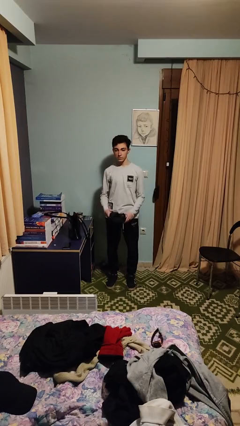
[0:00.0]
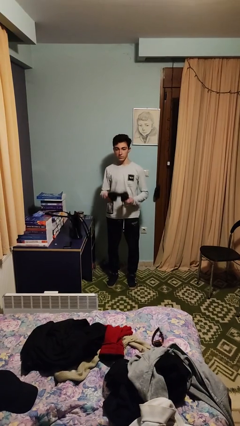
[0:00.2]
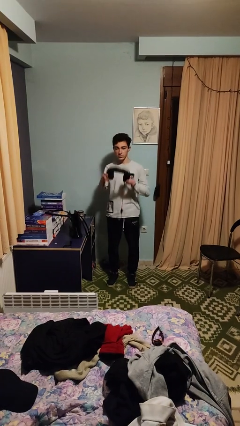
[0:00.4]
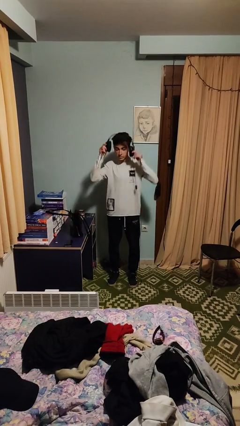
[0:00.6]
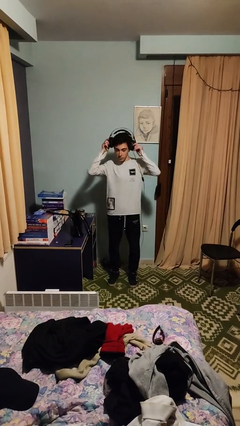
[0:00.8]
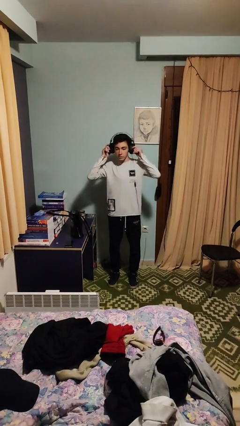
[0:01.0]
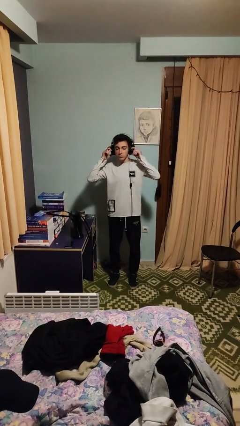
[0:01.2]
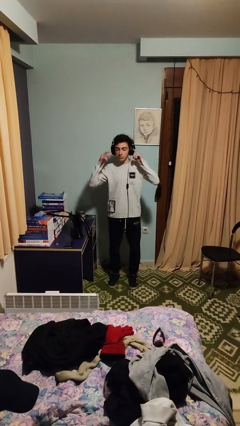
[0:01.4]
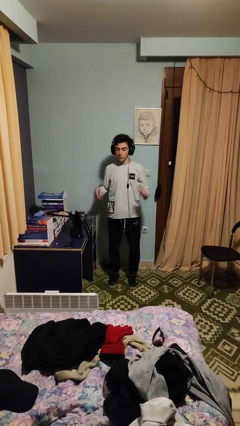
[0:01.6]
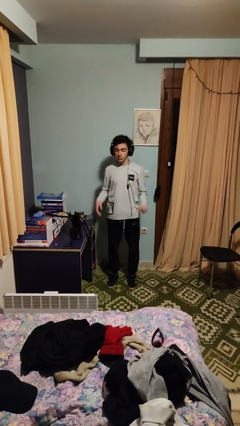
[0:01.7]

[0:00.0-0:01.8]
person puts on headphones

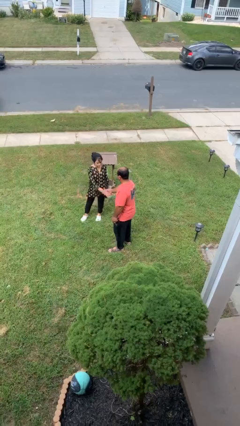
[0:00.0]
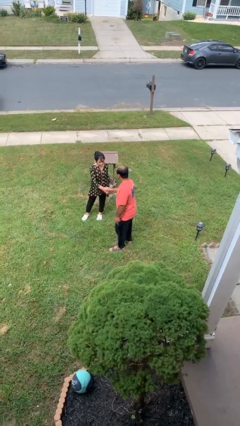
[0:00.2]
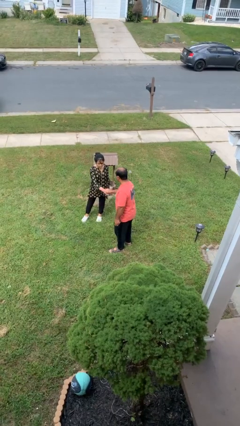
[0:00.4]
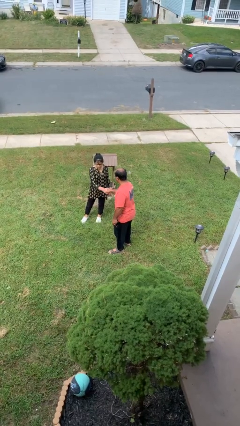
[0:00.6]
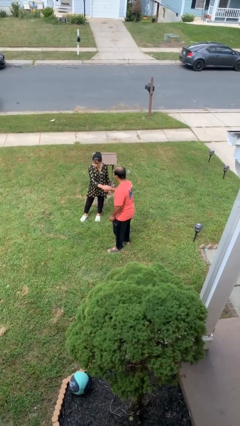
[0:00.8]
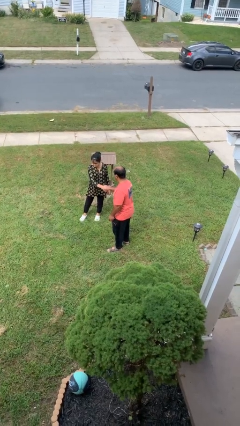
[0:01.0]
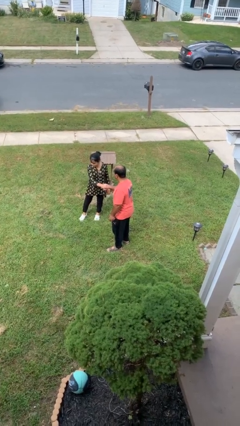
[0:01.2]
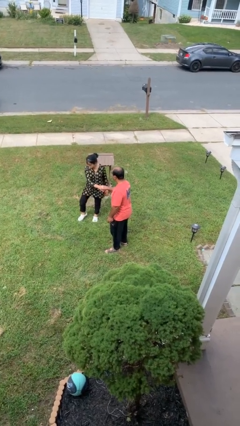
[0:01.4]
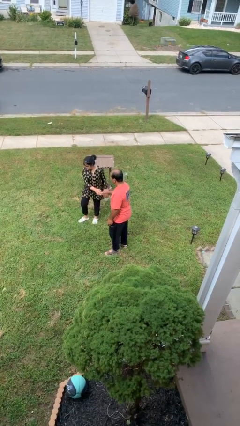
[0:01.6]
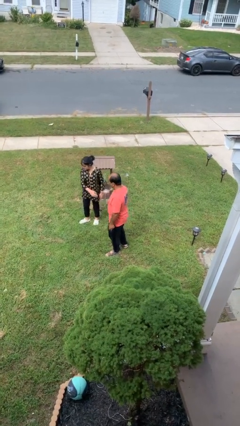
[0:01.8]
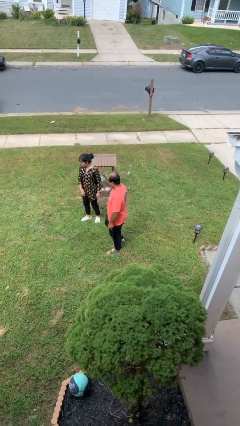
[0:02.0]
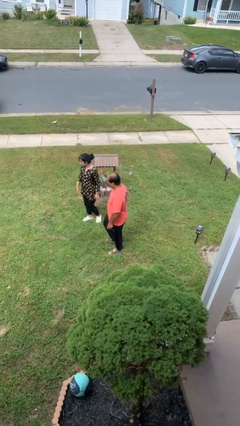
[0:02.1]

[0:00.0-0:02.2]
person shakes hand

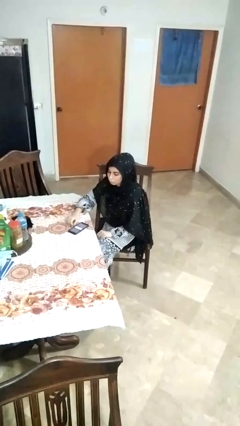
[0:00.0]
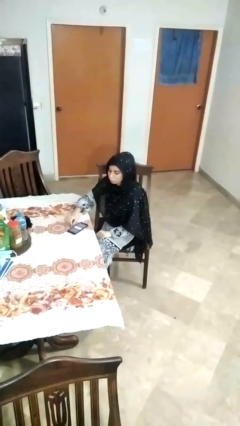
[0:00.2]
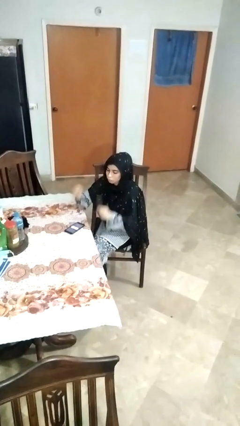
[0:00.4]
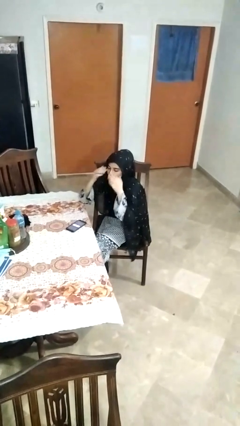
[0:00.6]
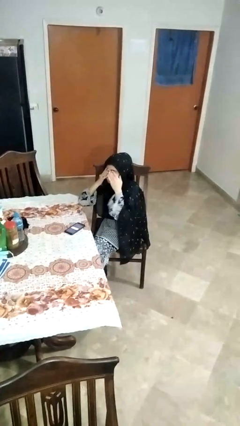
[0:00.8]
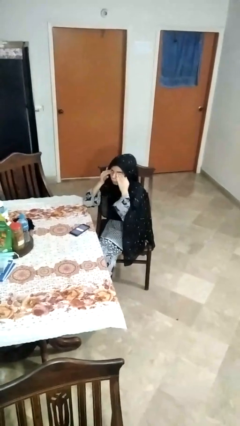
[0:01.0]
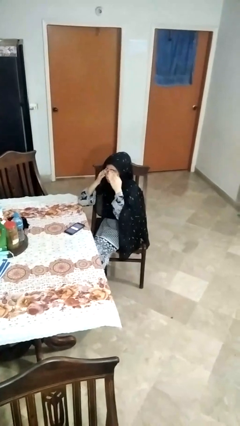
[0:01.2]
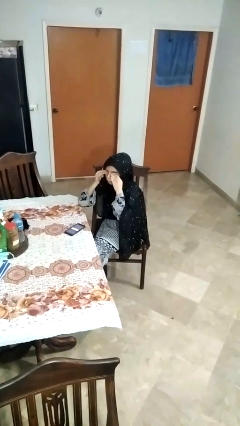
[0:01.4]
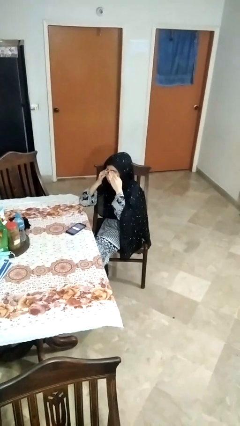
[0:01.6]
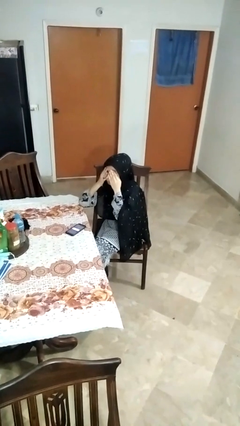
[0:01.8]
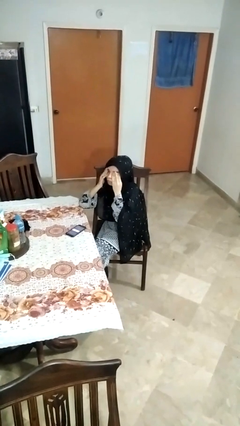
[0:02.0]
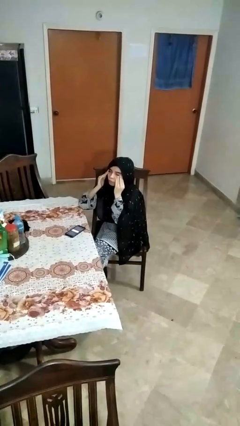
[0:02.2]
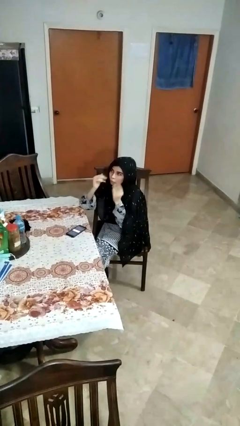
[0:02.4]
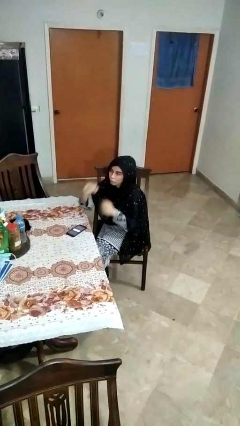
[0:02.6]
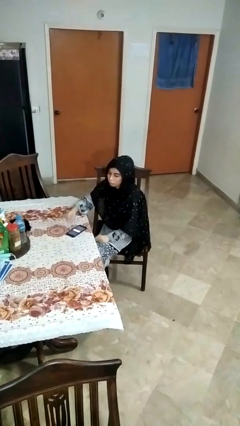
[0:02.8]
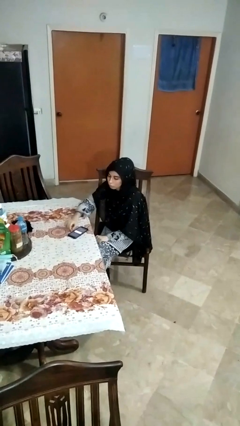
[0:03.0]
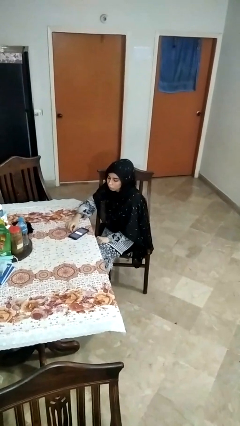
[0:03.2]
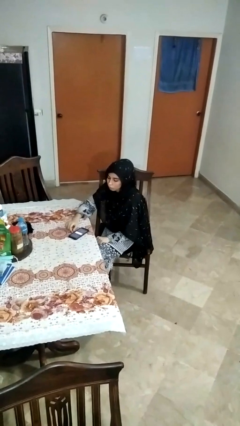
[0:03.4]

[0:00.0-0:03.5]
person rubs eyes

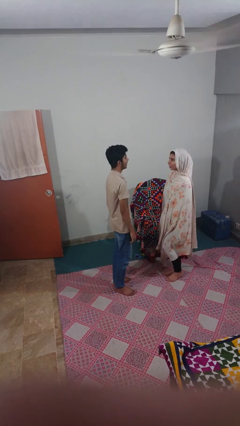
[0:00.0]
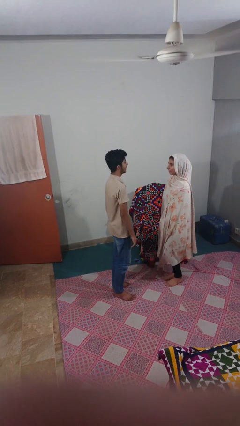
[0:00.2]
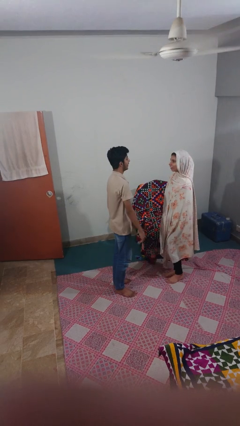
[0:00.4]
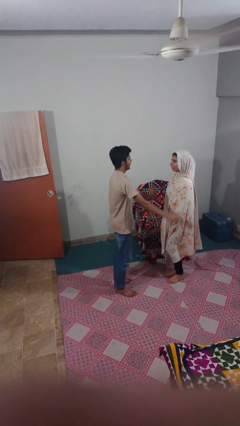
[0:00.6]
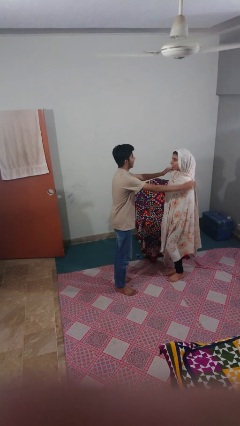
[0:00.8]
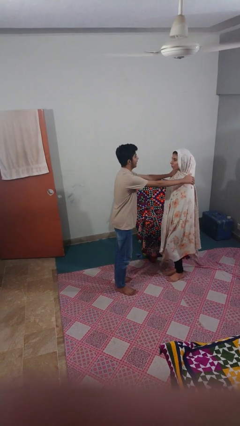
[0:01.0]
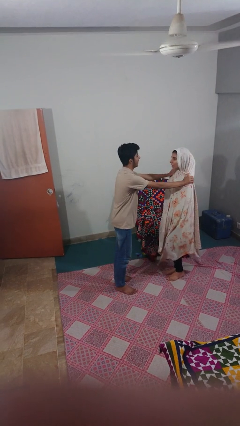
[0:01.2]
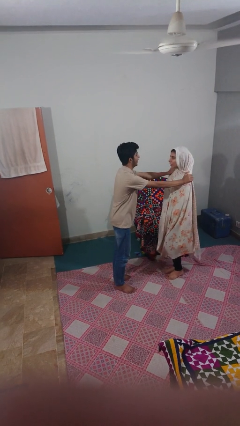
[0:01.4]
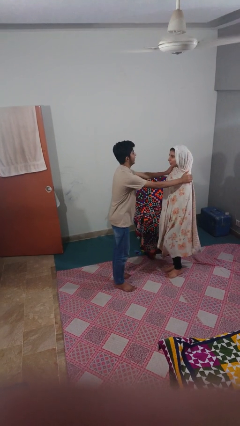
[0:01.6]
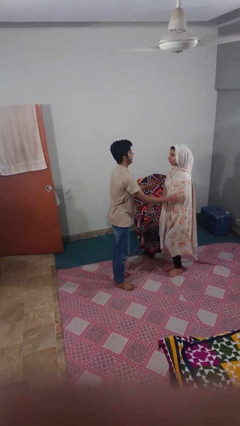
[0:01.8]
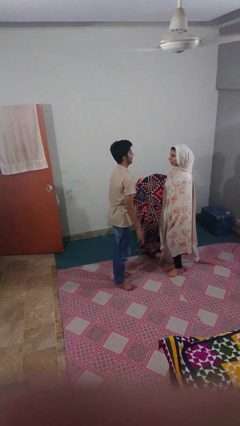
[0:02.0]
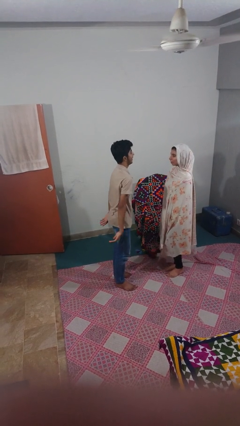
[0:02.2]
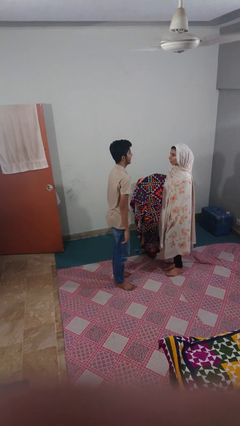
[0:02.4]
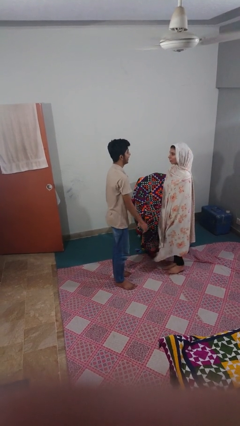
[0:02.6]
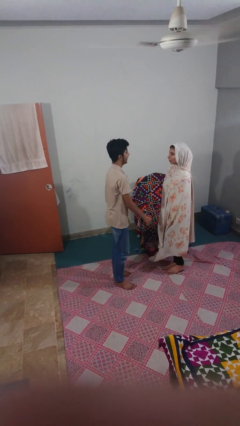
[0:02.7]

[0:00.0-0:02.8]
person pounds shoulders of person

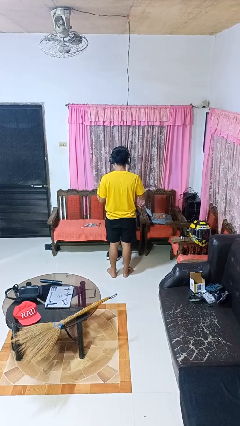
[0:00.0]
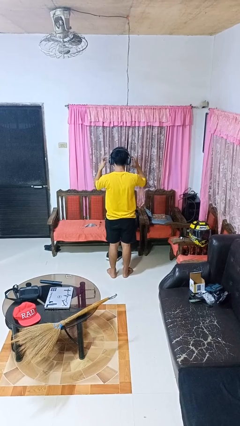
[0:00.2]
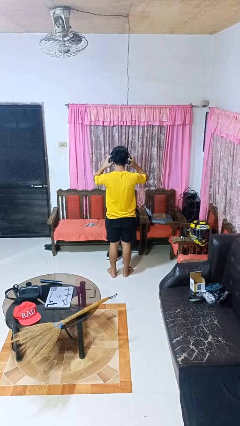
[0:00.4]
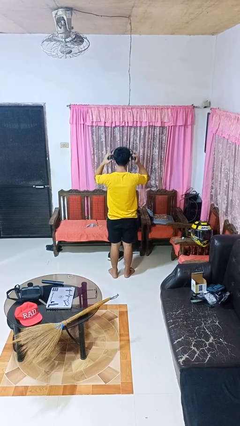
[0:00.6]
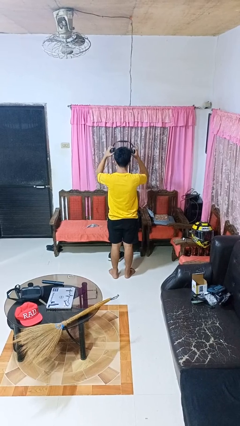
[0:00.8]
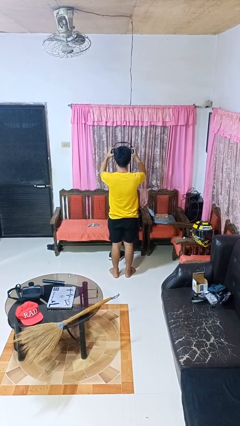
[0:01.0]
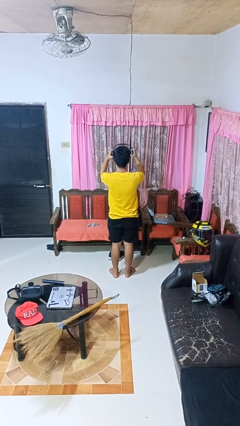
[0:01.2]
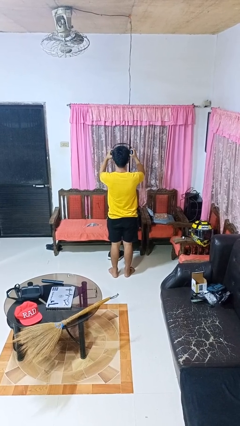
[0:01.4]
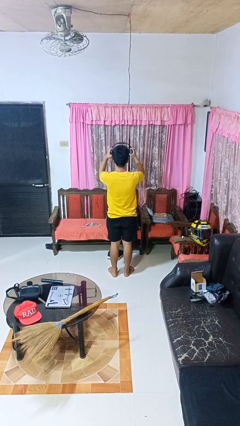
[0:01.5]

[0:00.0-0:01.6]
person takes off headphones

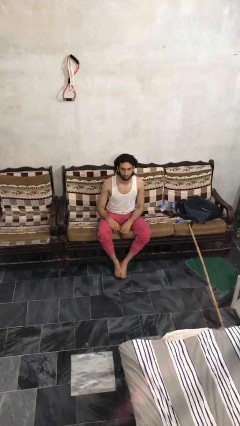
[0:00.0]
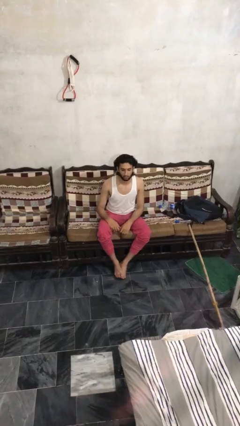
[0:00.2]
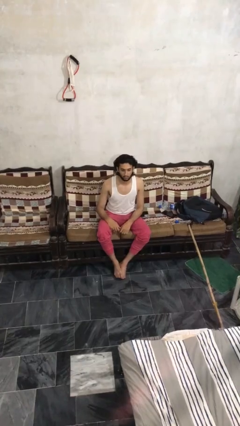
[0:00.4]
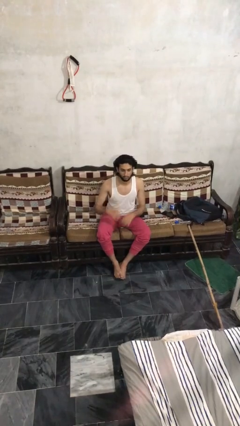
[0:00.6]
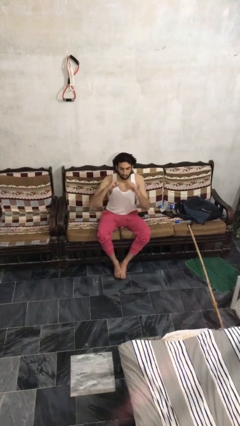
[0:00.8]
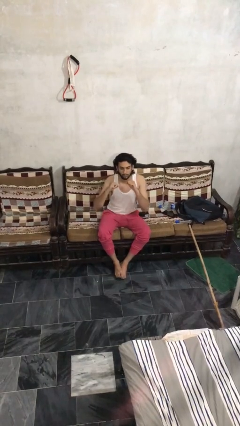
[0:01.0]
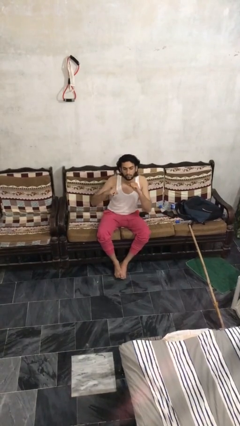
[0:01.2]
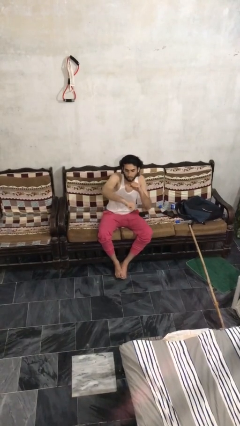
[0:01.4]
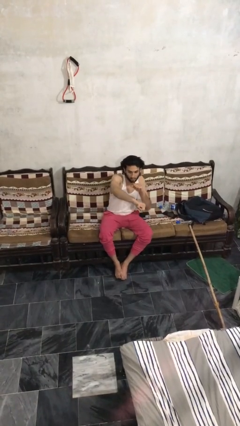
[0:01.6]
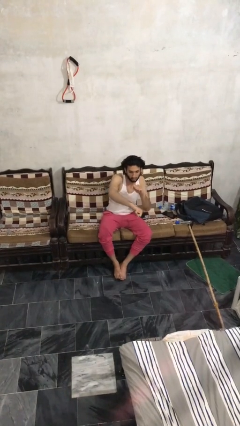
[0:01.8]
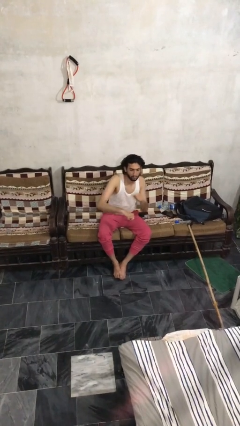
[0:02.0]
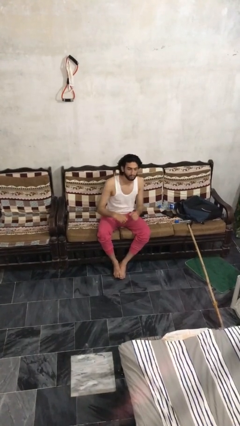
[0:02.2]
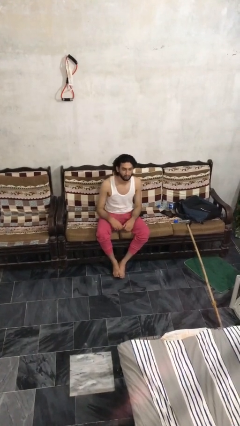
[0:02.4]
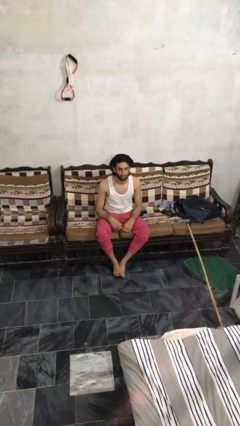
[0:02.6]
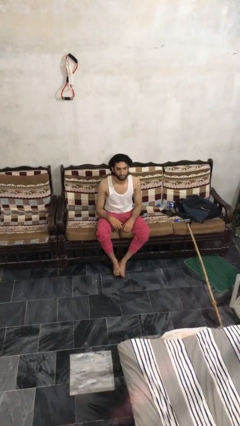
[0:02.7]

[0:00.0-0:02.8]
person punches

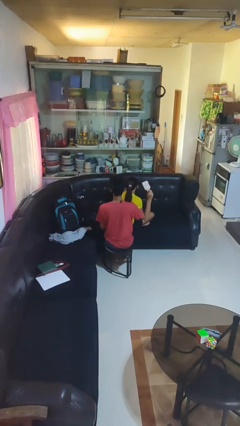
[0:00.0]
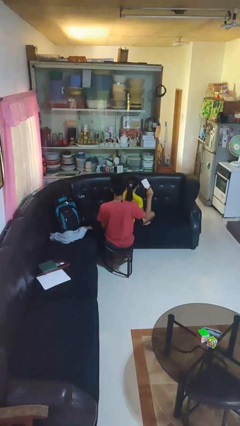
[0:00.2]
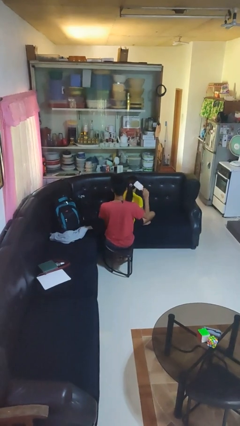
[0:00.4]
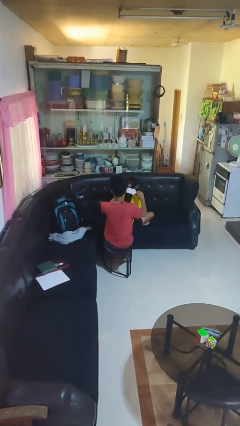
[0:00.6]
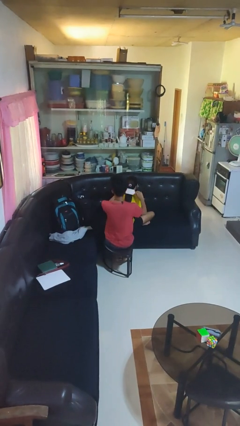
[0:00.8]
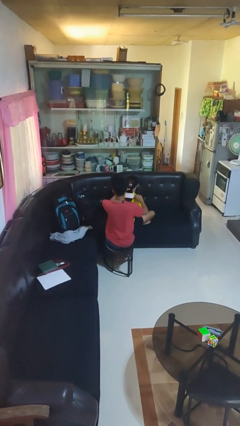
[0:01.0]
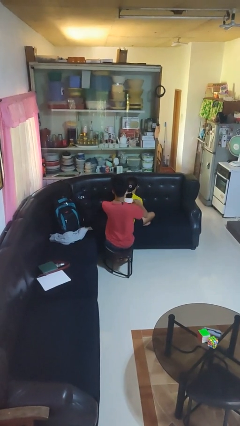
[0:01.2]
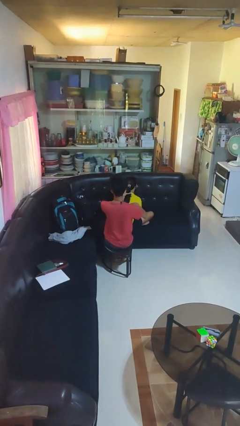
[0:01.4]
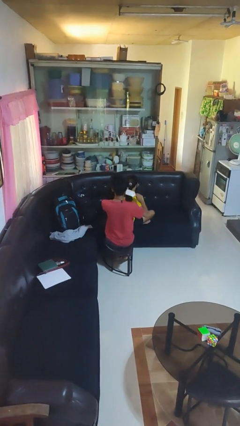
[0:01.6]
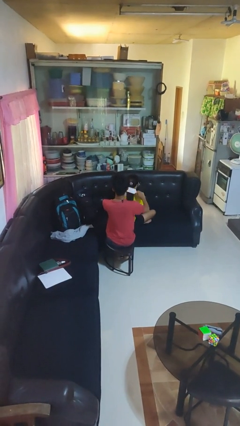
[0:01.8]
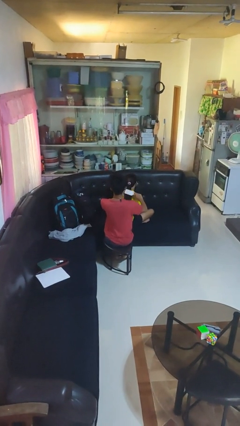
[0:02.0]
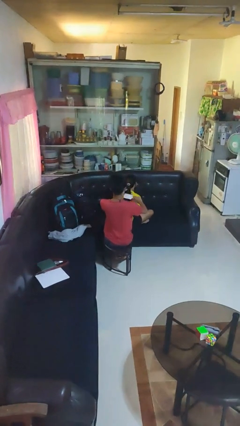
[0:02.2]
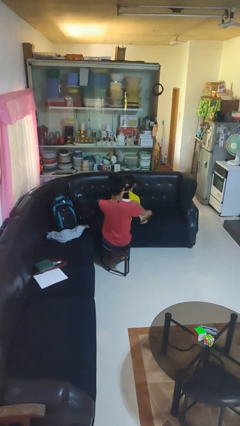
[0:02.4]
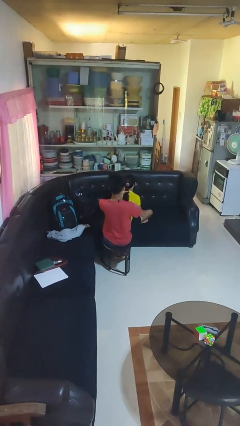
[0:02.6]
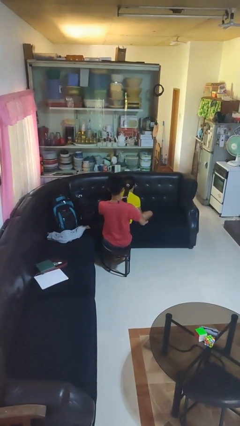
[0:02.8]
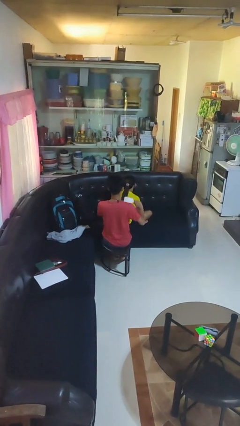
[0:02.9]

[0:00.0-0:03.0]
person brushes hair of person
